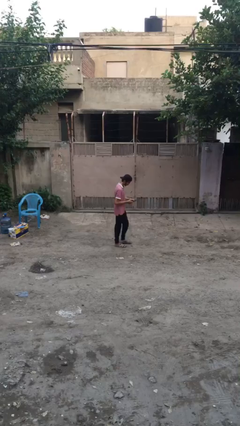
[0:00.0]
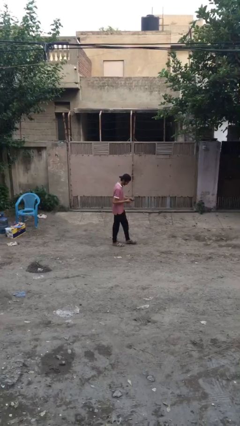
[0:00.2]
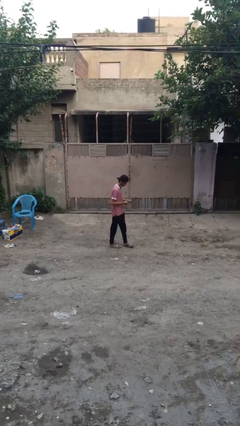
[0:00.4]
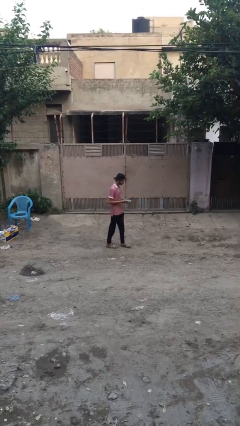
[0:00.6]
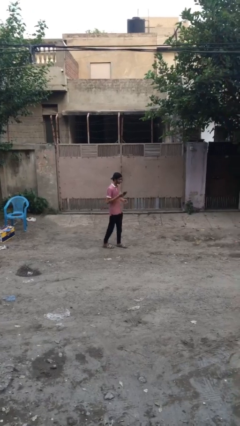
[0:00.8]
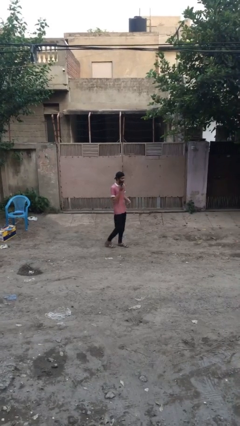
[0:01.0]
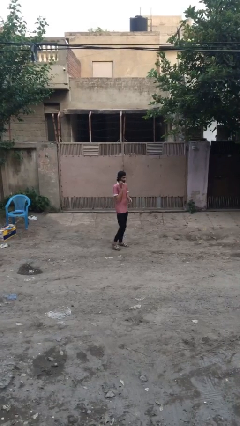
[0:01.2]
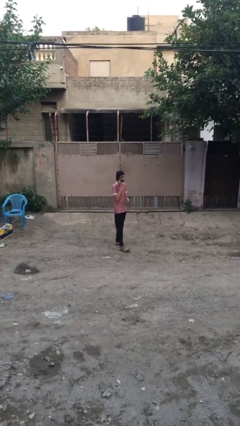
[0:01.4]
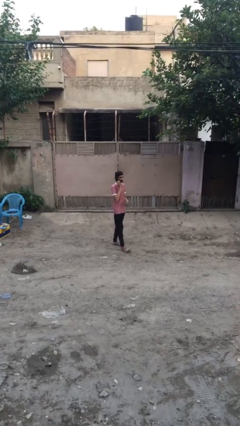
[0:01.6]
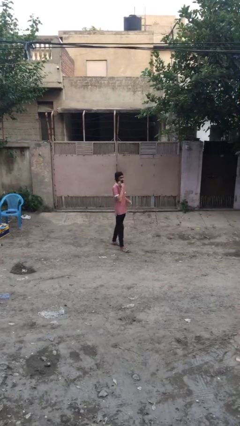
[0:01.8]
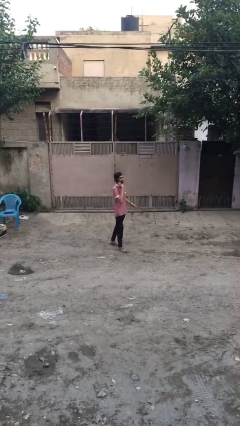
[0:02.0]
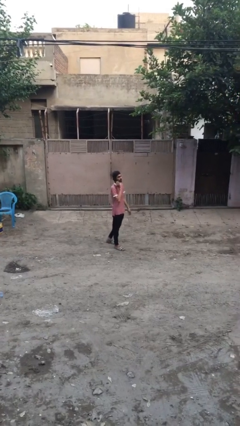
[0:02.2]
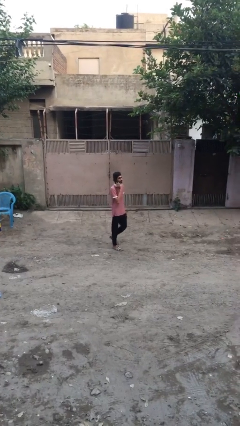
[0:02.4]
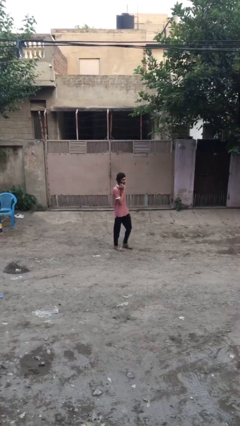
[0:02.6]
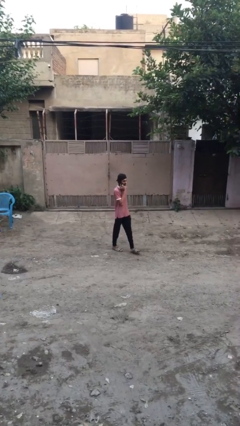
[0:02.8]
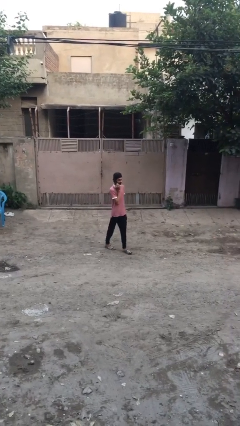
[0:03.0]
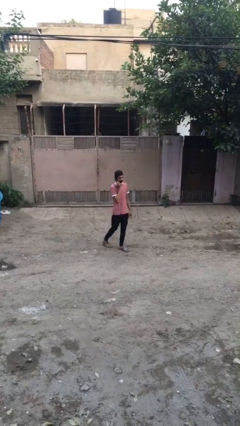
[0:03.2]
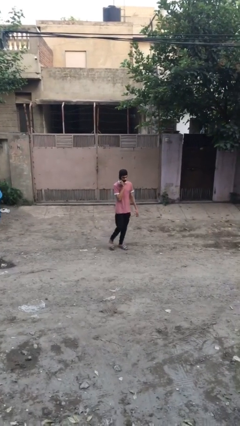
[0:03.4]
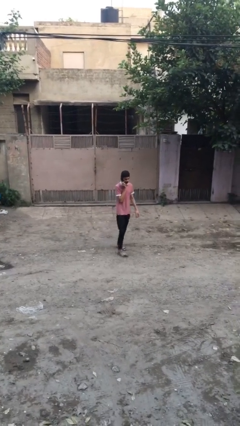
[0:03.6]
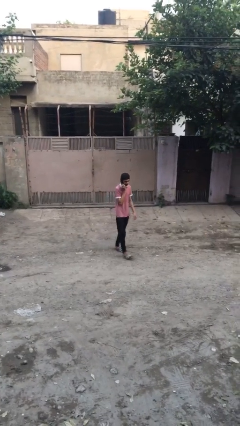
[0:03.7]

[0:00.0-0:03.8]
person talks on phone

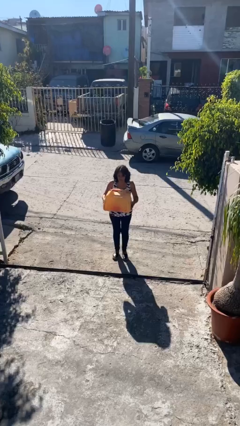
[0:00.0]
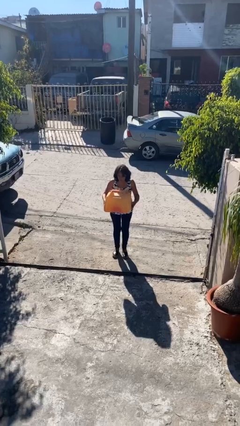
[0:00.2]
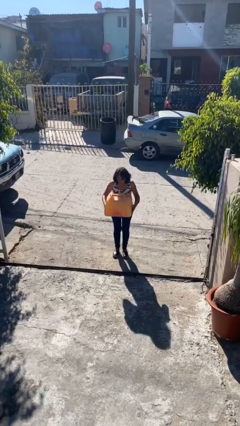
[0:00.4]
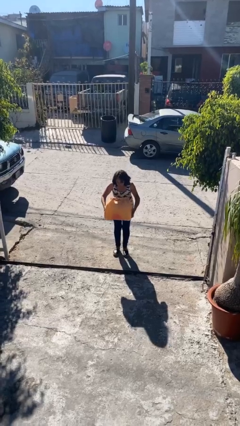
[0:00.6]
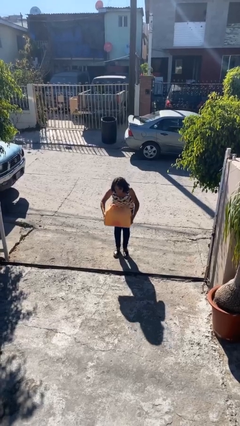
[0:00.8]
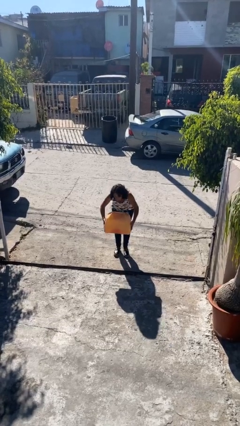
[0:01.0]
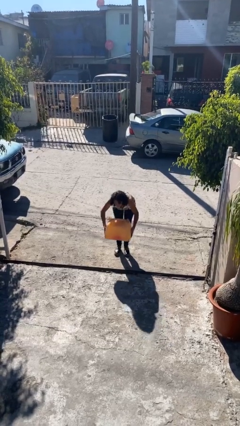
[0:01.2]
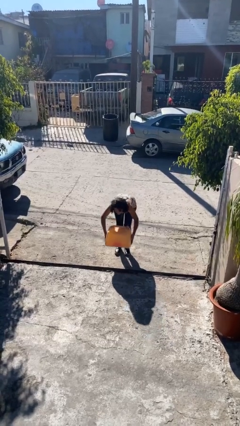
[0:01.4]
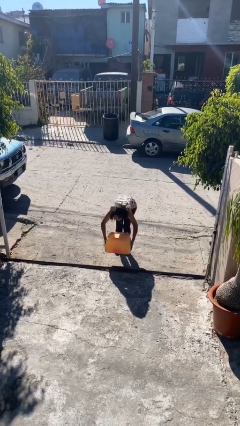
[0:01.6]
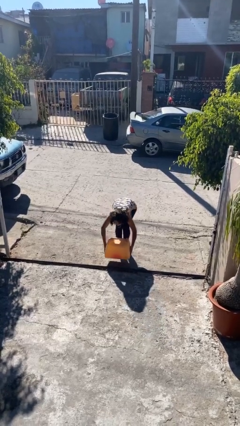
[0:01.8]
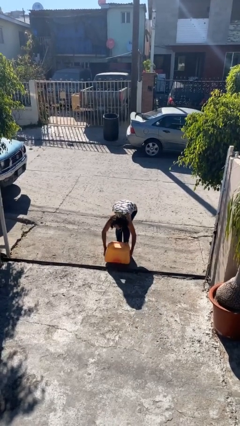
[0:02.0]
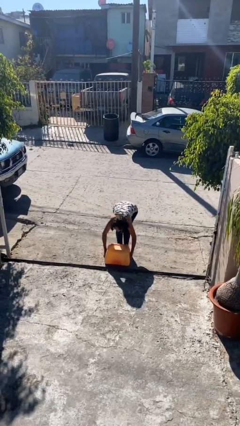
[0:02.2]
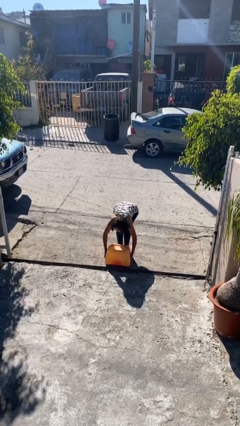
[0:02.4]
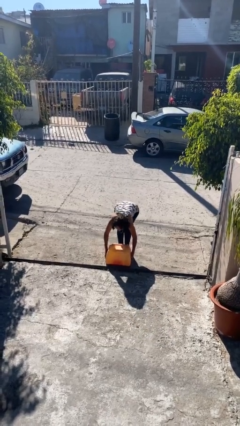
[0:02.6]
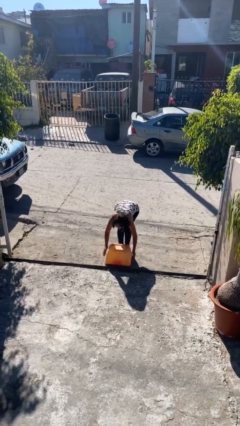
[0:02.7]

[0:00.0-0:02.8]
person puts down object on floor

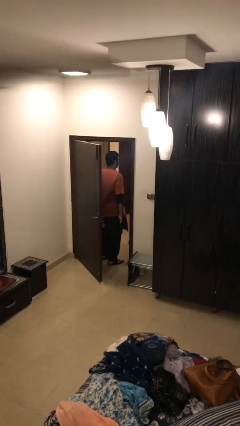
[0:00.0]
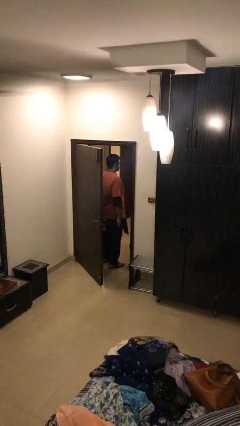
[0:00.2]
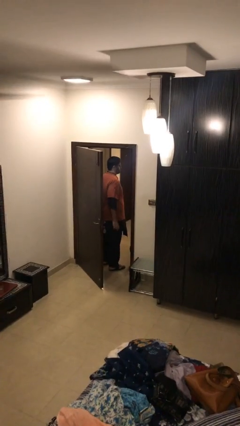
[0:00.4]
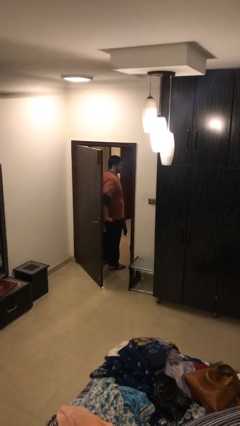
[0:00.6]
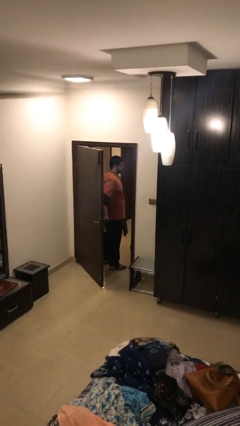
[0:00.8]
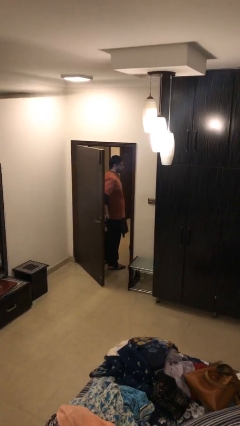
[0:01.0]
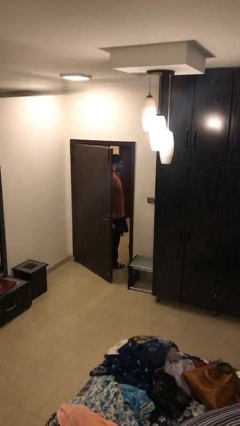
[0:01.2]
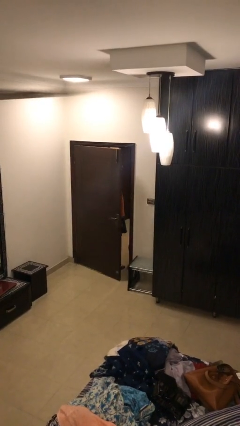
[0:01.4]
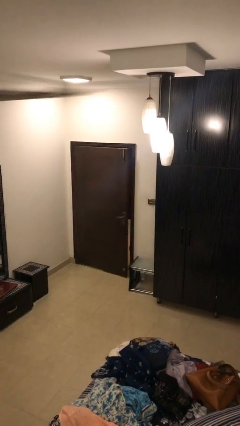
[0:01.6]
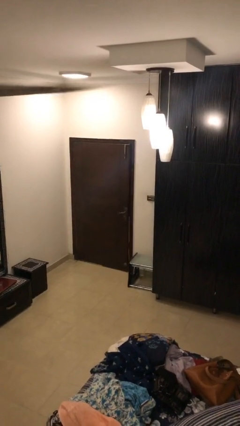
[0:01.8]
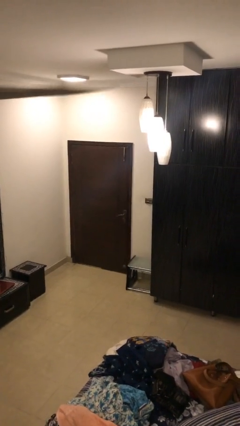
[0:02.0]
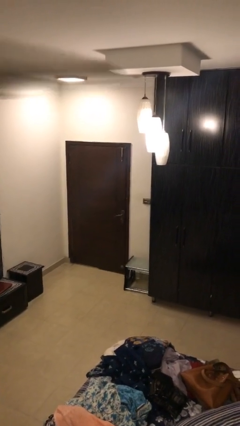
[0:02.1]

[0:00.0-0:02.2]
person closes facility door

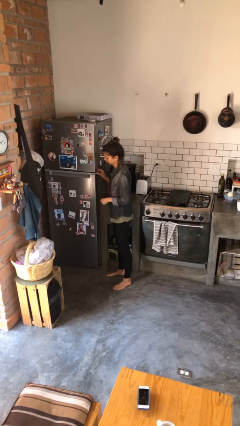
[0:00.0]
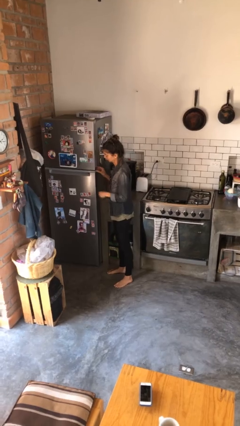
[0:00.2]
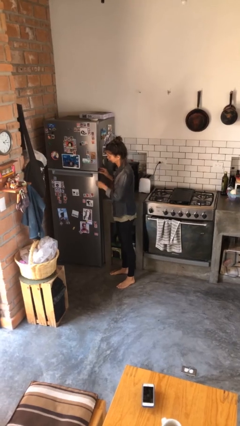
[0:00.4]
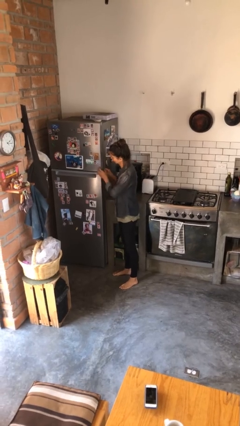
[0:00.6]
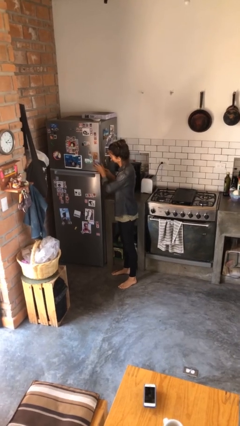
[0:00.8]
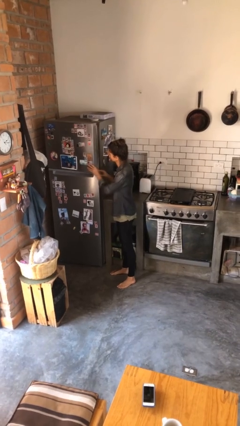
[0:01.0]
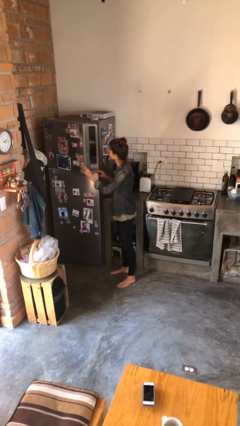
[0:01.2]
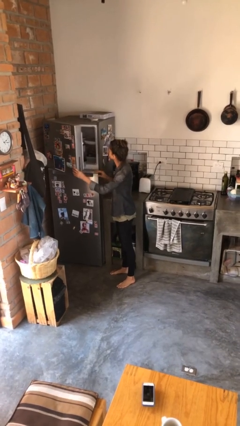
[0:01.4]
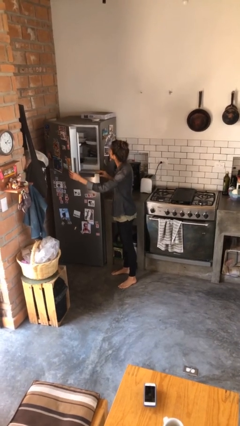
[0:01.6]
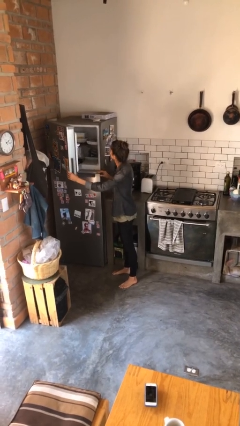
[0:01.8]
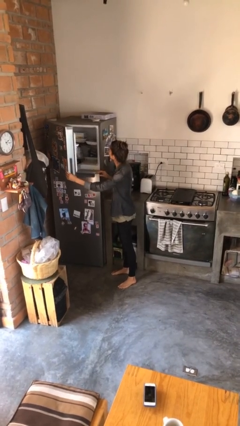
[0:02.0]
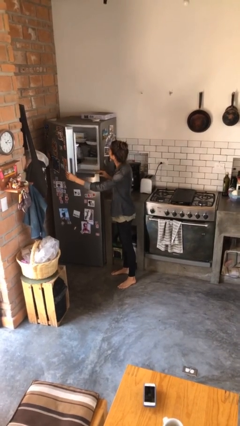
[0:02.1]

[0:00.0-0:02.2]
person opens refrigerator

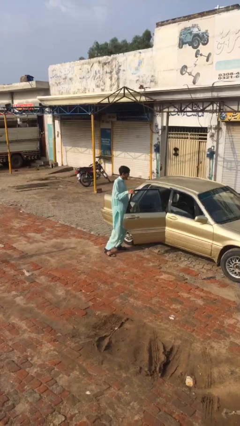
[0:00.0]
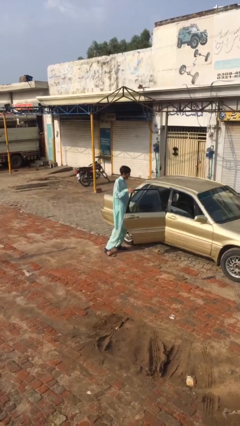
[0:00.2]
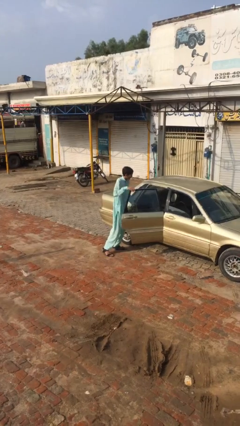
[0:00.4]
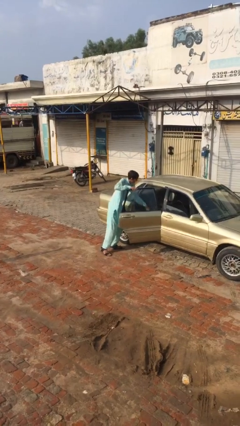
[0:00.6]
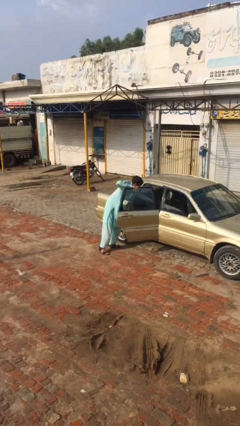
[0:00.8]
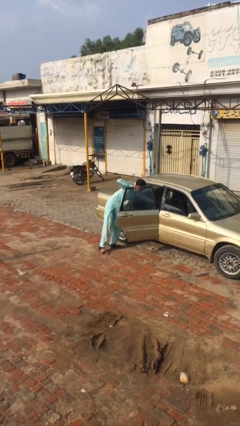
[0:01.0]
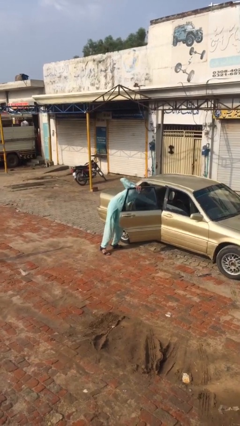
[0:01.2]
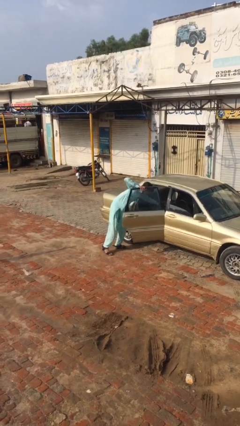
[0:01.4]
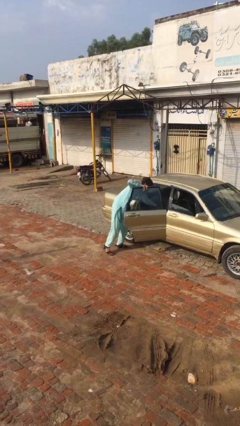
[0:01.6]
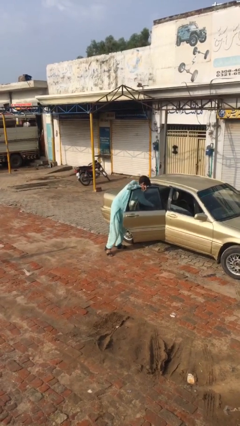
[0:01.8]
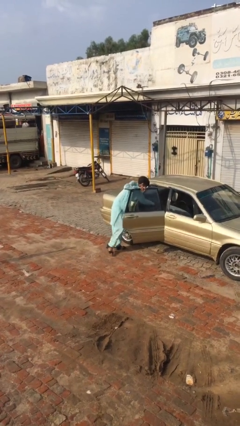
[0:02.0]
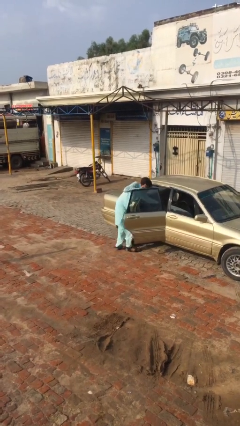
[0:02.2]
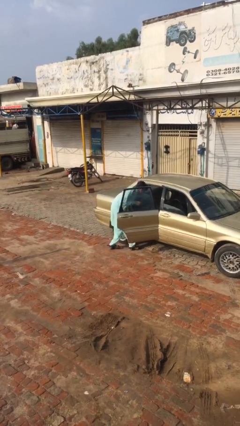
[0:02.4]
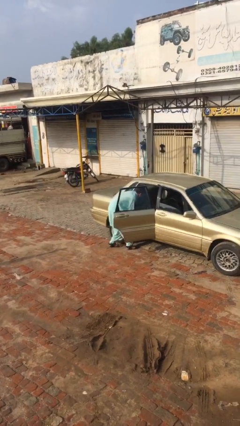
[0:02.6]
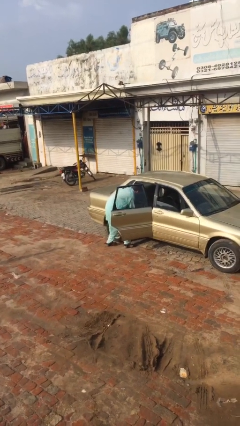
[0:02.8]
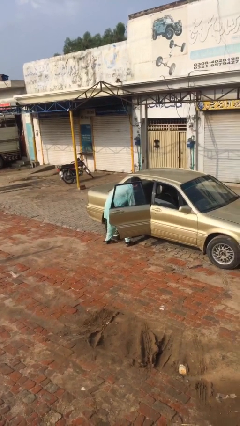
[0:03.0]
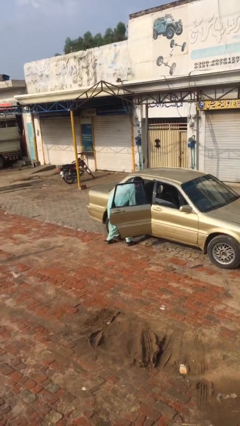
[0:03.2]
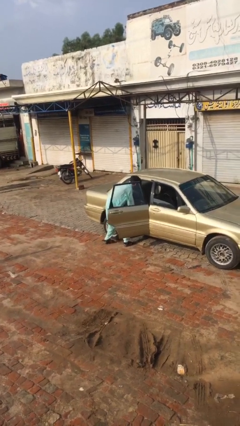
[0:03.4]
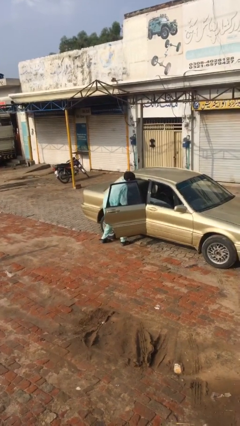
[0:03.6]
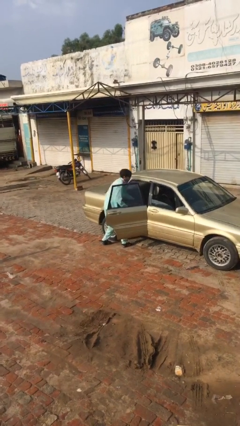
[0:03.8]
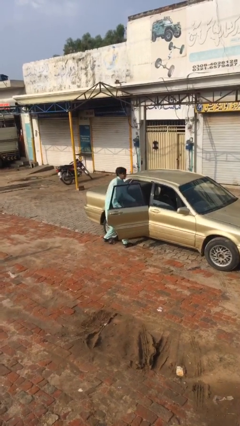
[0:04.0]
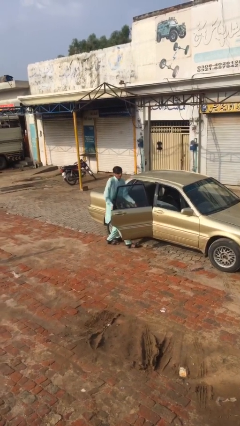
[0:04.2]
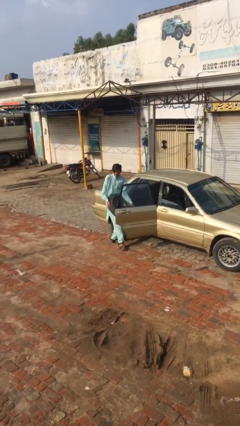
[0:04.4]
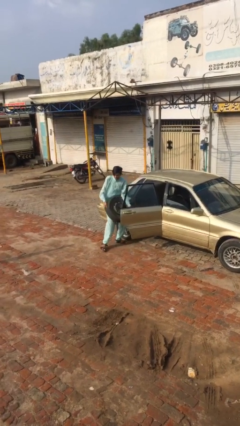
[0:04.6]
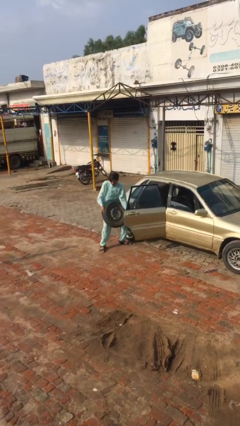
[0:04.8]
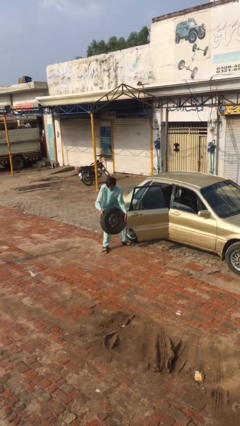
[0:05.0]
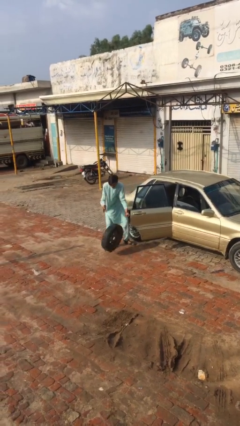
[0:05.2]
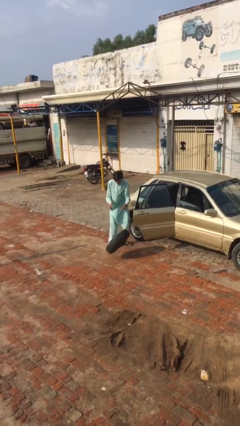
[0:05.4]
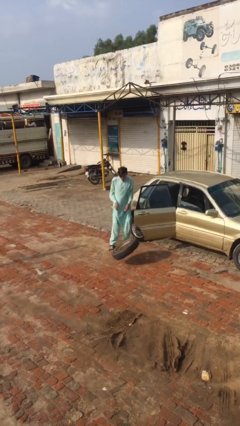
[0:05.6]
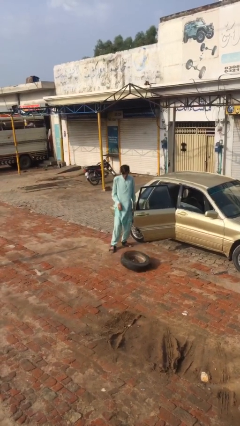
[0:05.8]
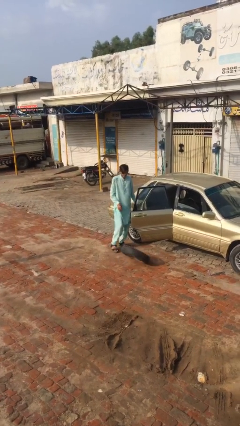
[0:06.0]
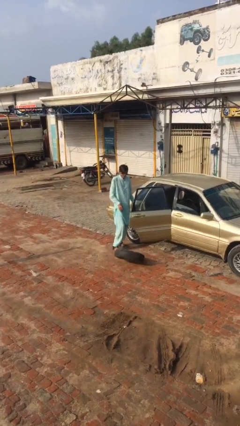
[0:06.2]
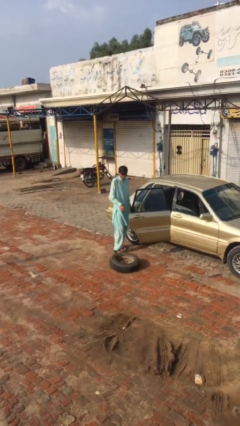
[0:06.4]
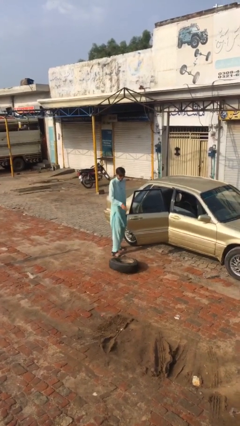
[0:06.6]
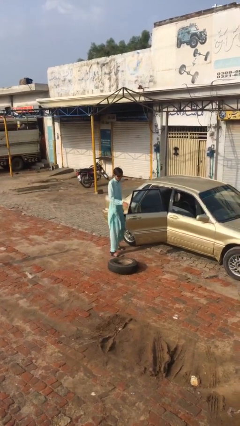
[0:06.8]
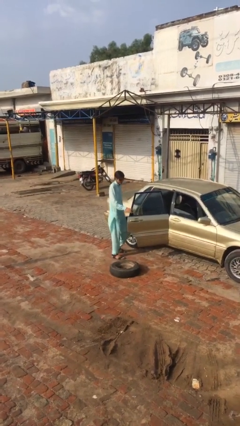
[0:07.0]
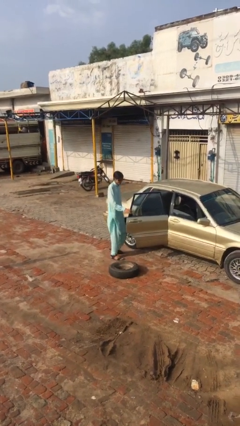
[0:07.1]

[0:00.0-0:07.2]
person unloads car
